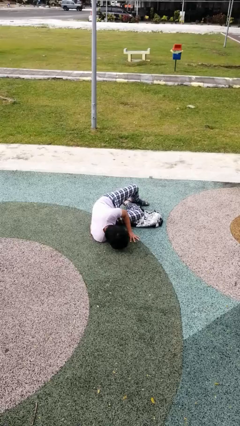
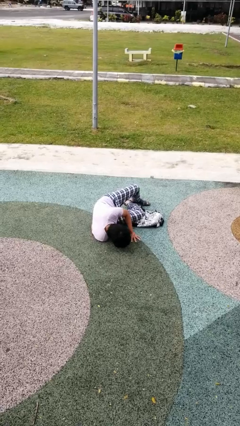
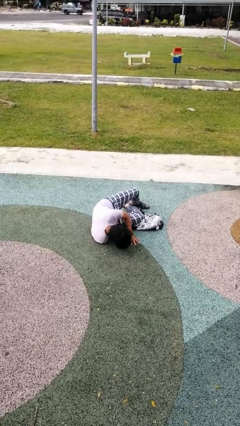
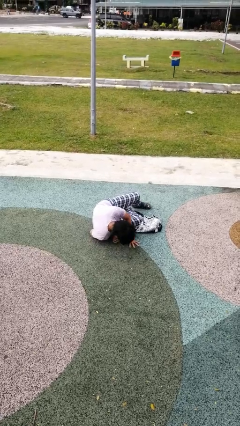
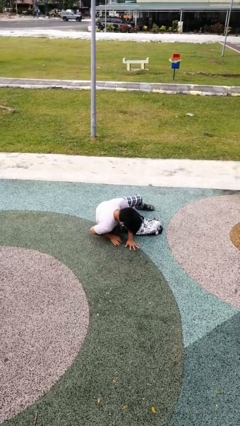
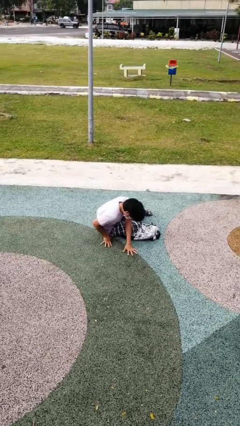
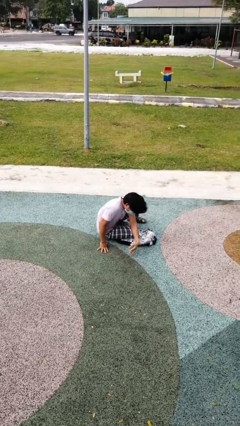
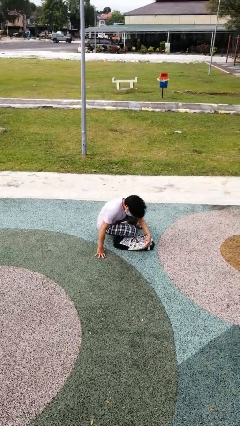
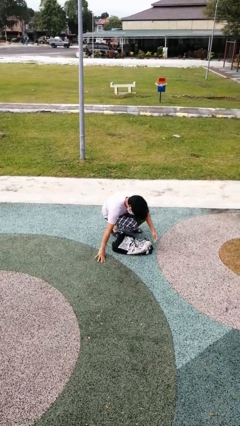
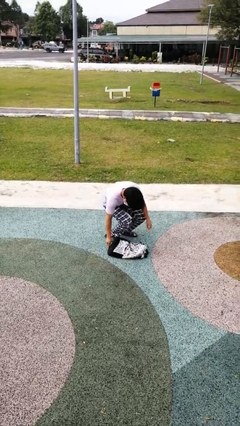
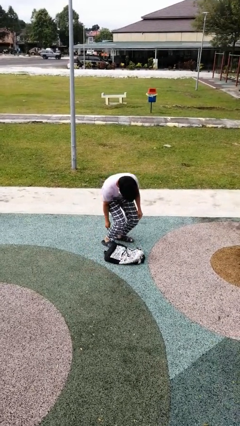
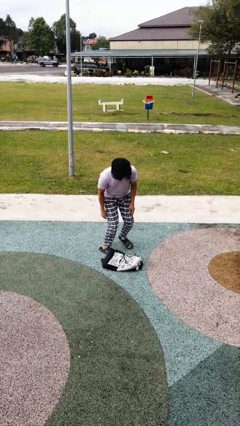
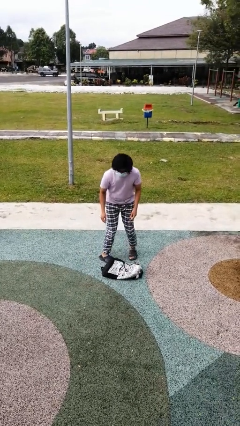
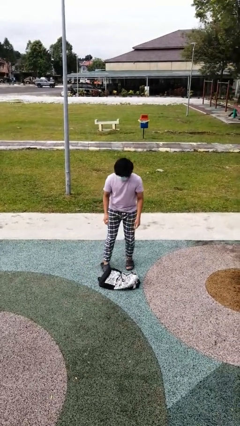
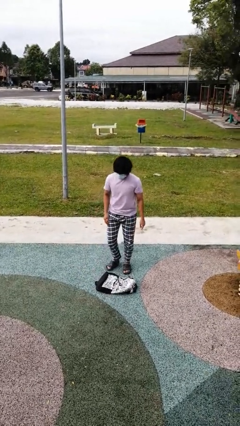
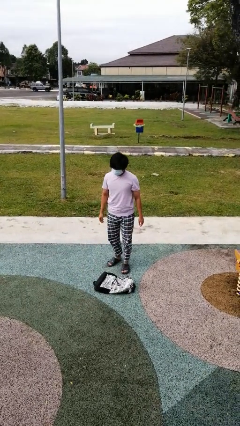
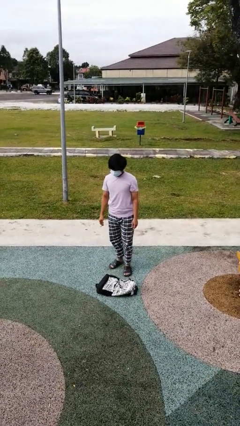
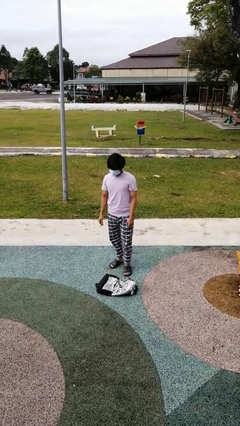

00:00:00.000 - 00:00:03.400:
person stands up from floor

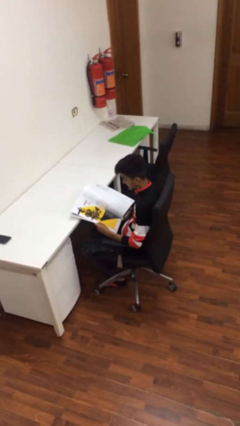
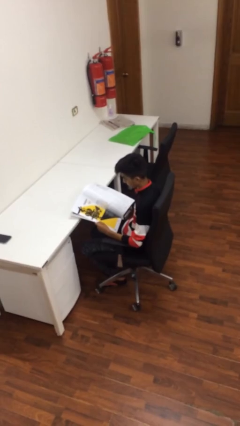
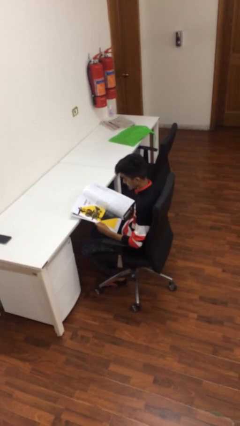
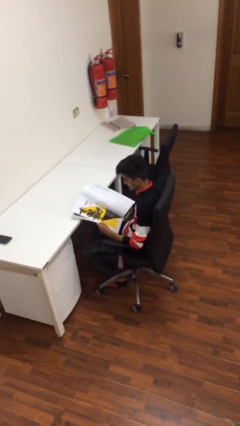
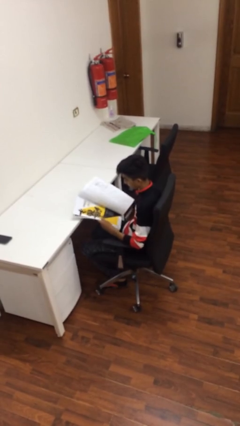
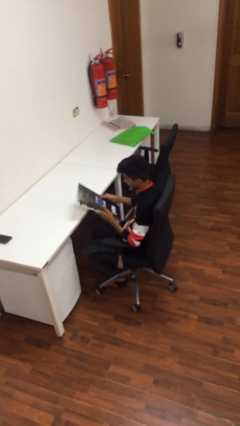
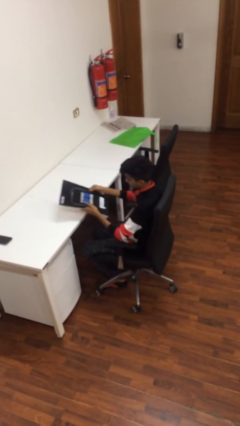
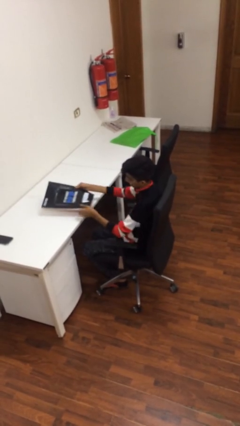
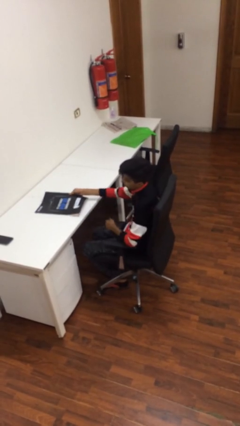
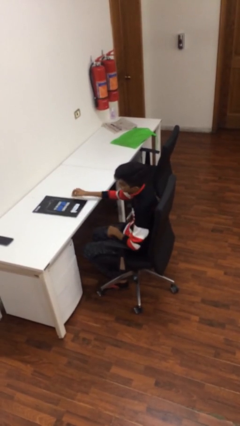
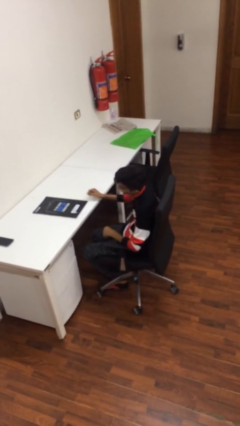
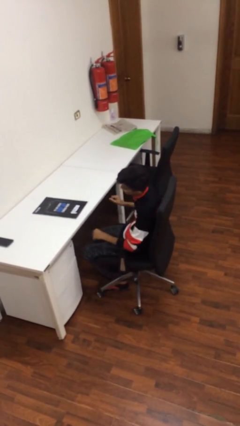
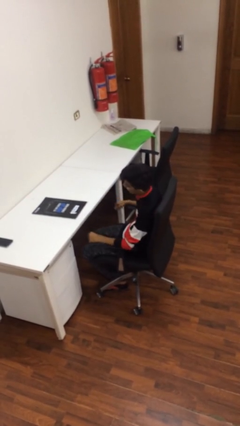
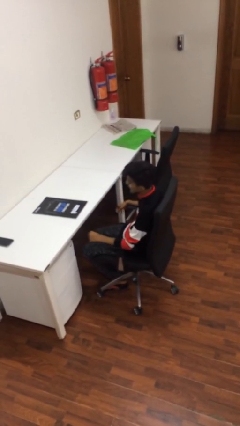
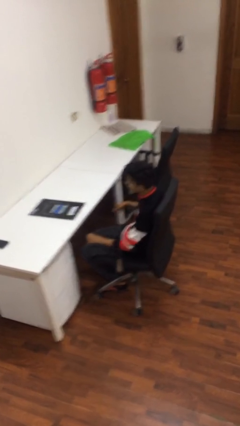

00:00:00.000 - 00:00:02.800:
person puts down object on table

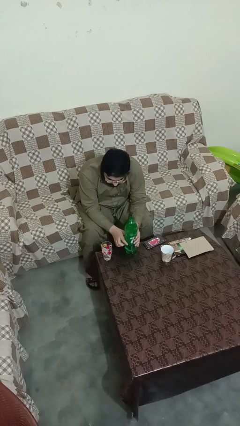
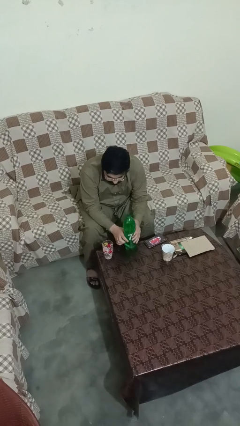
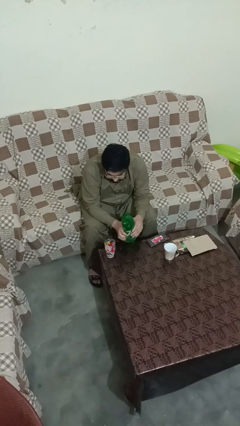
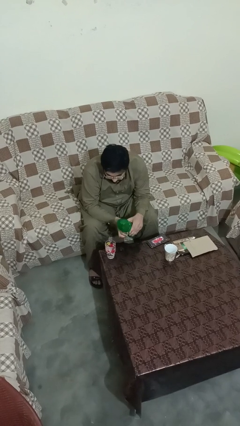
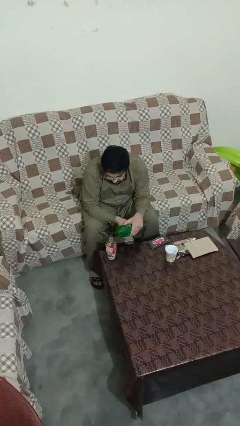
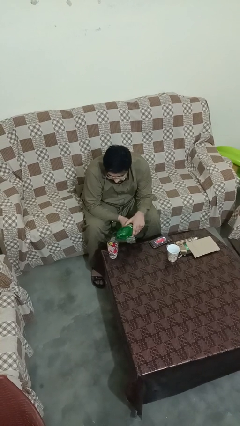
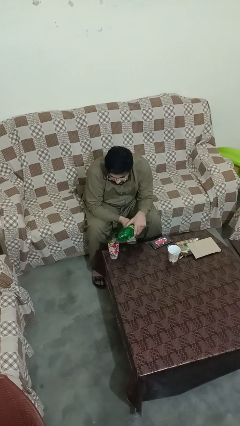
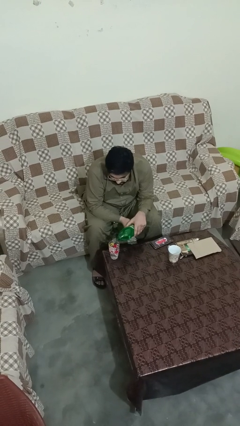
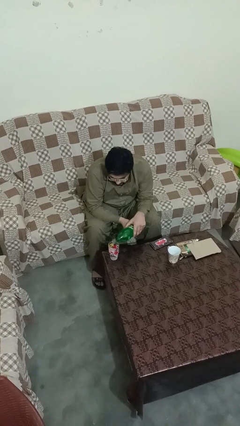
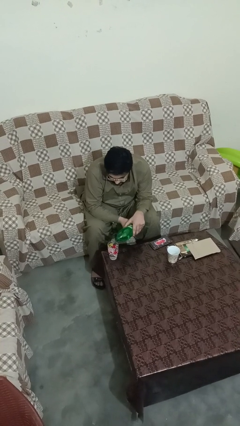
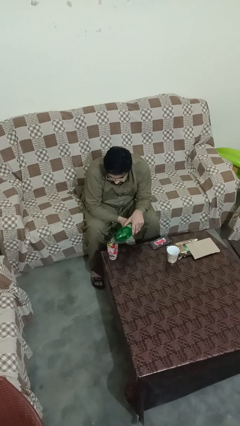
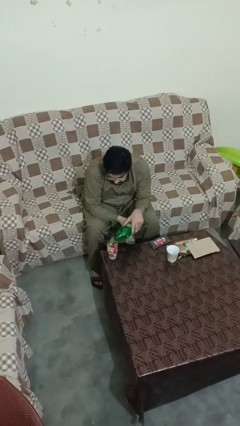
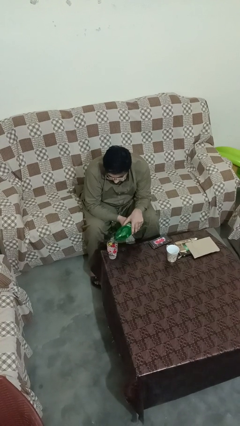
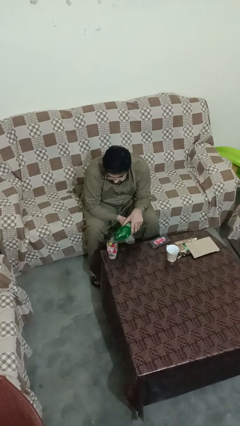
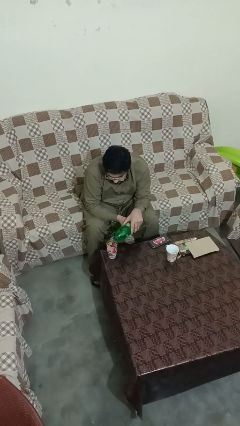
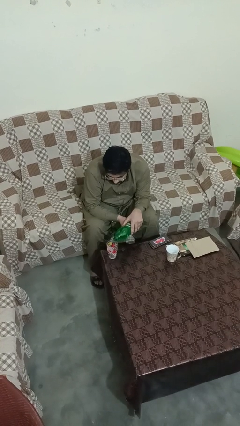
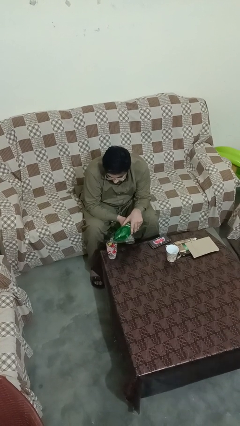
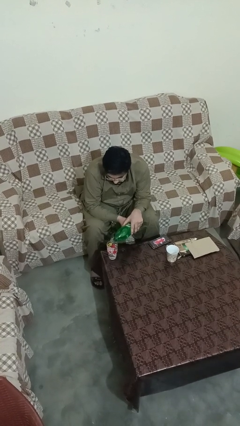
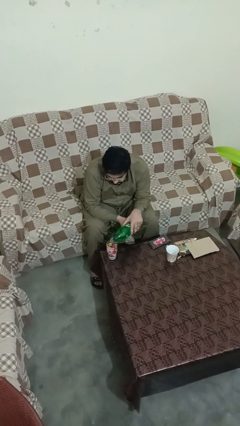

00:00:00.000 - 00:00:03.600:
person pours liquid into cup

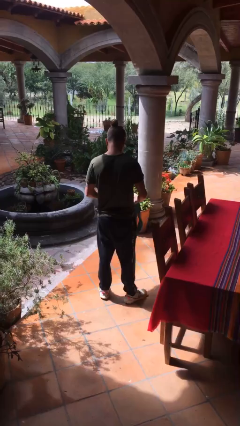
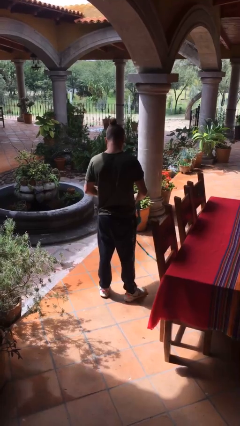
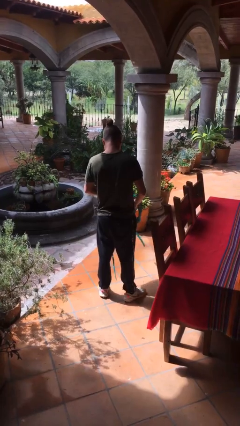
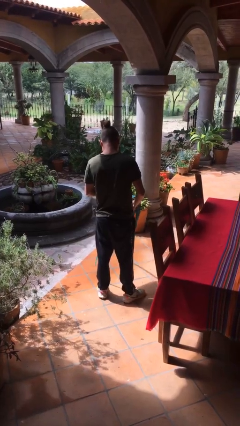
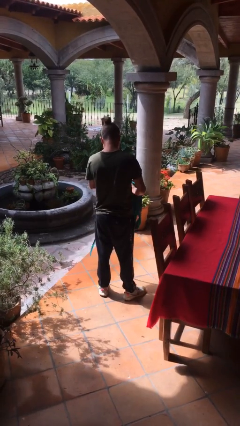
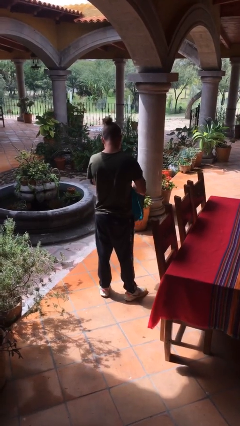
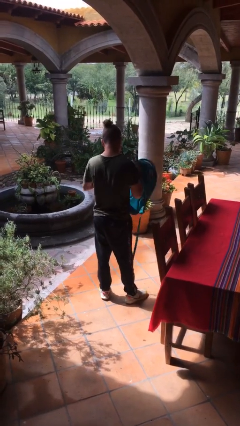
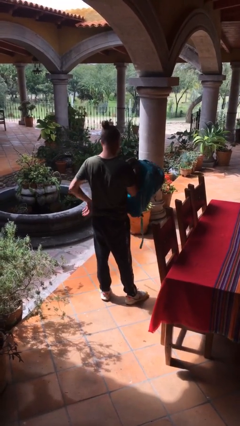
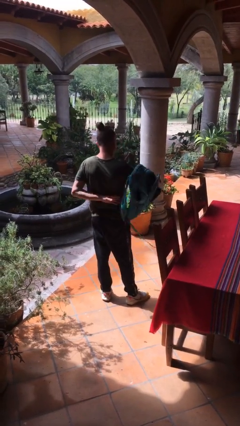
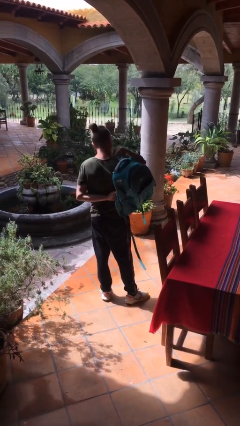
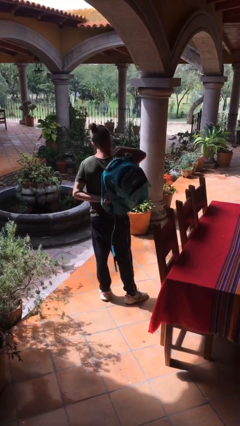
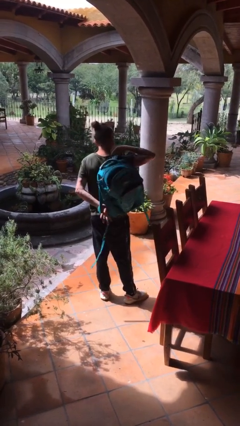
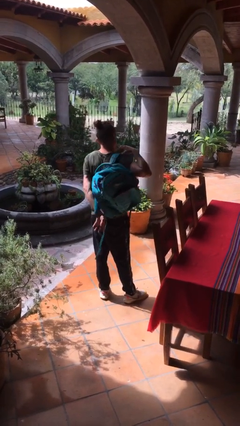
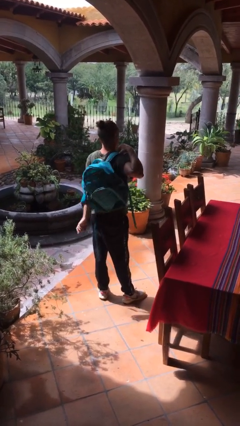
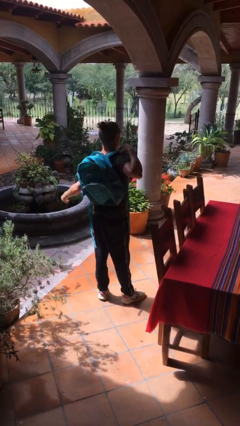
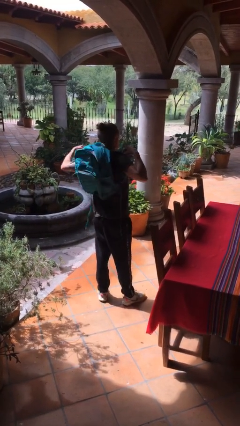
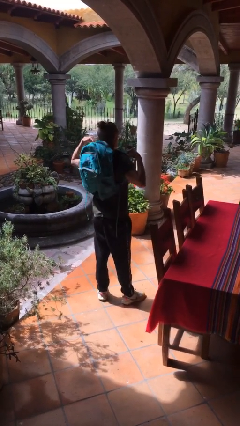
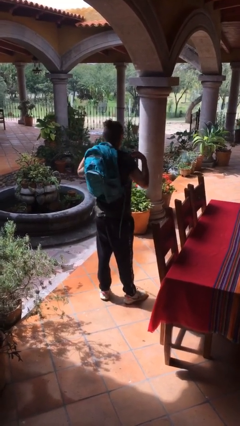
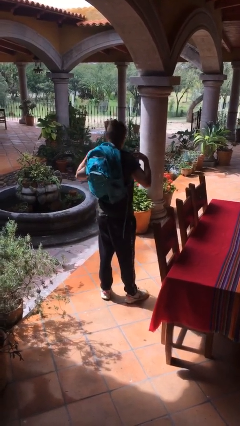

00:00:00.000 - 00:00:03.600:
person puts on backpack

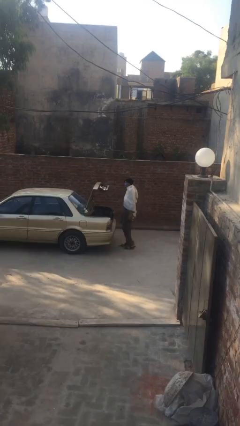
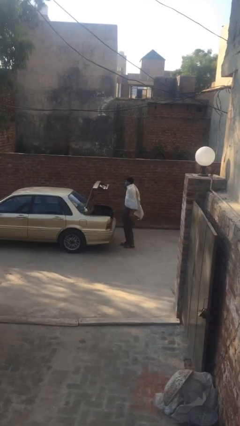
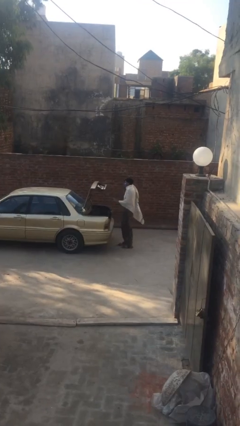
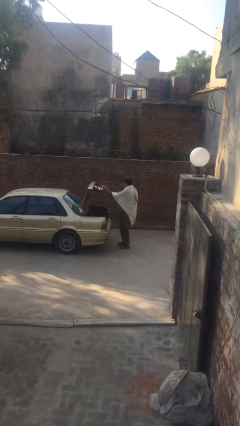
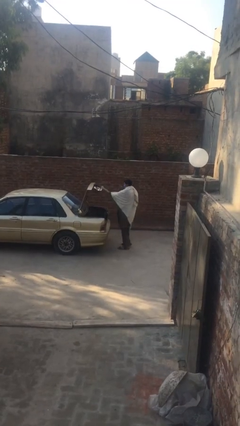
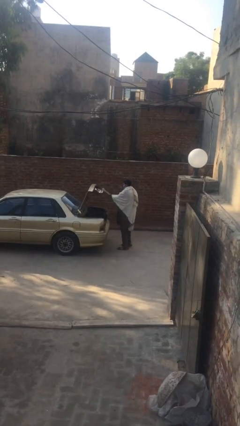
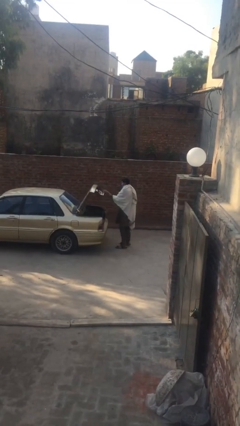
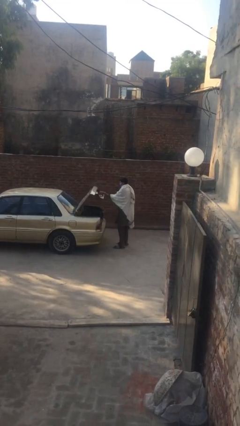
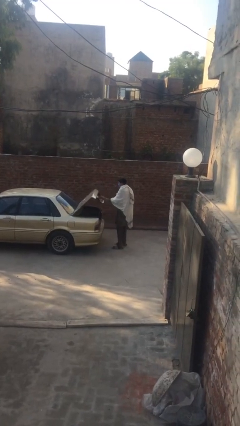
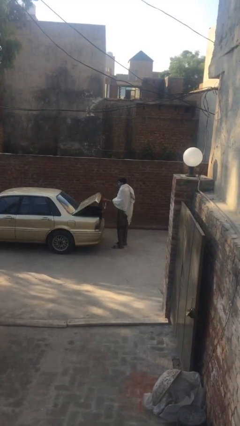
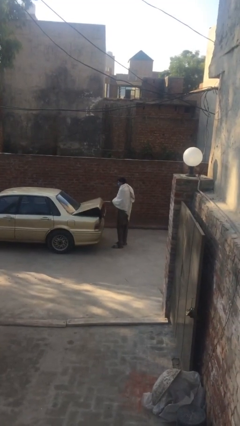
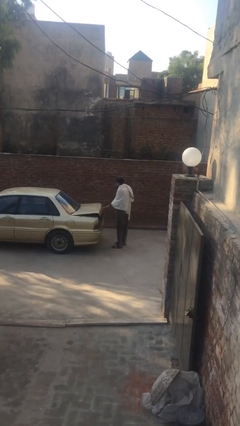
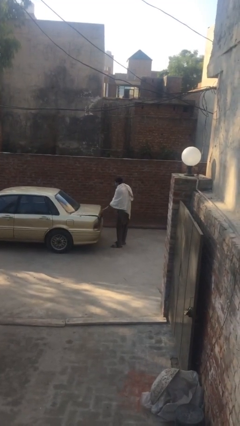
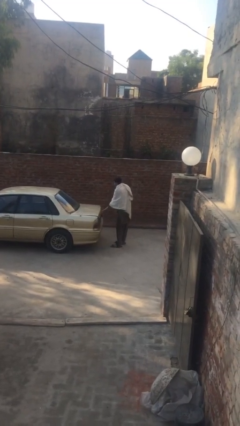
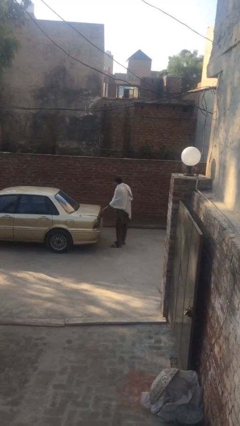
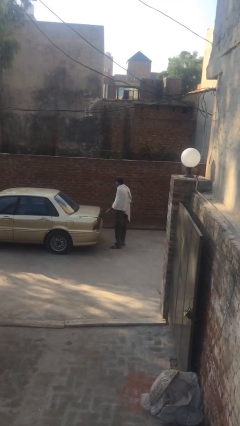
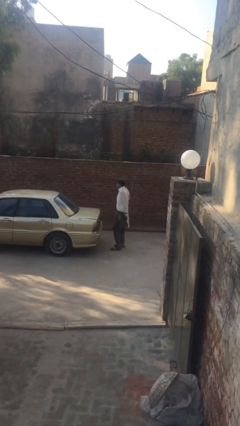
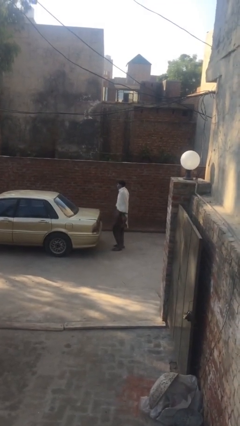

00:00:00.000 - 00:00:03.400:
person closes car trunk

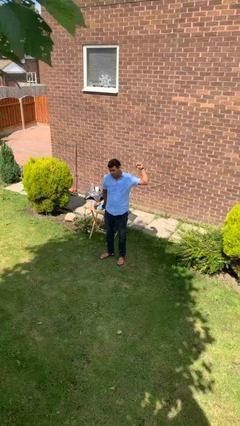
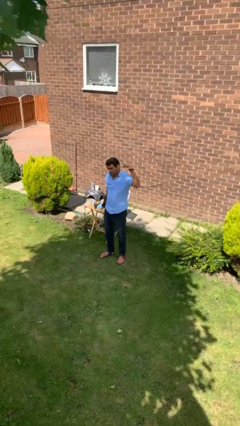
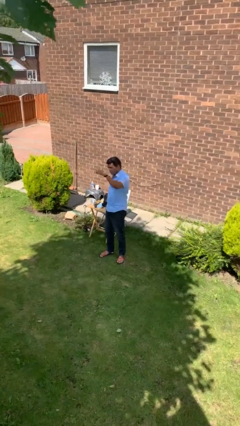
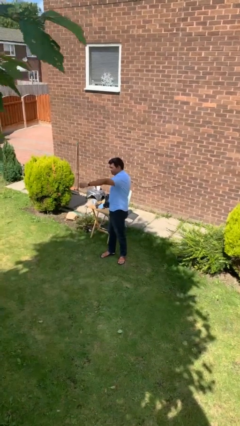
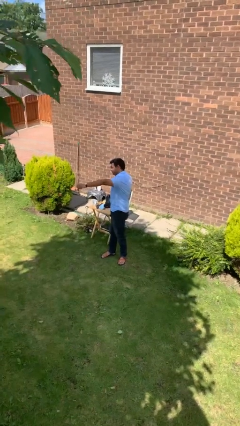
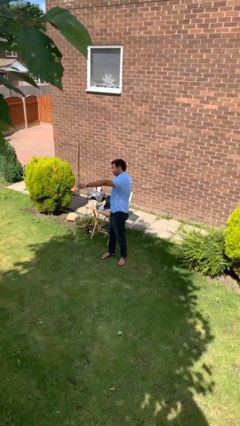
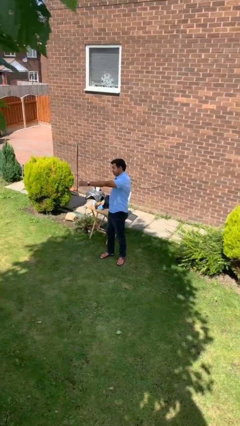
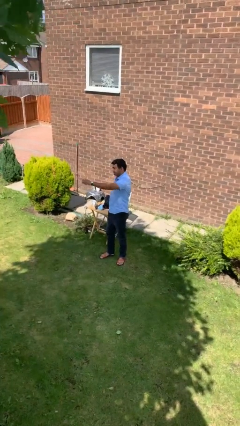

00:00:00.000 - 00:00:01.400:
person punches
